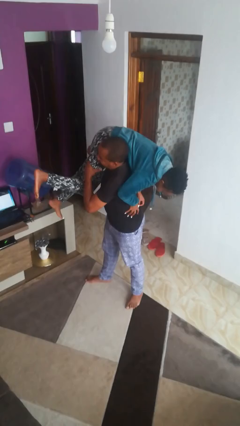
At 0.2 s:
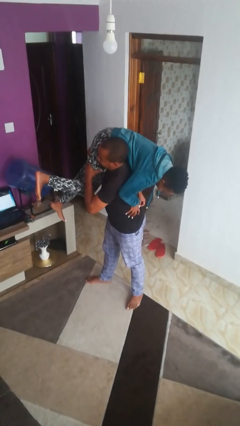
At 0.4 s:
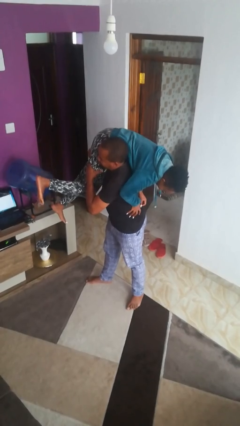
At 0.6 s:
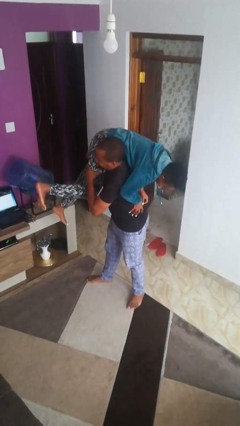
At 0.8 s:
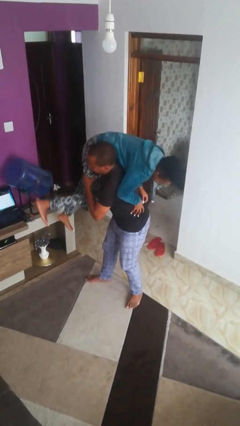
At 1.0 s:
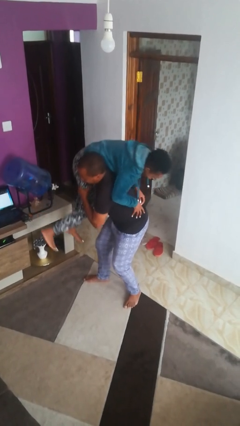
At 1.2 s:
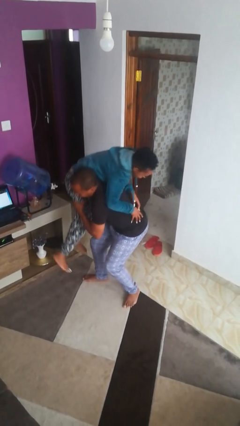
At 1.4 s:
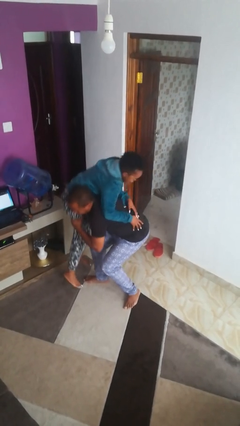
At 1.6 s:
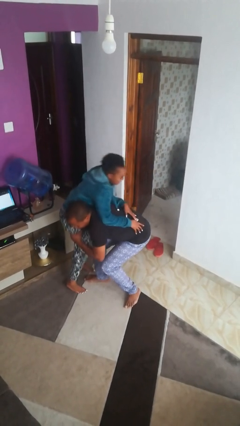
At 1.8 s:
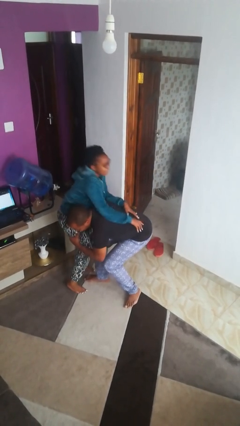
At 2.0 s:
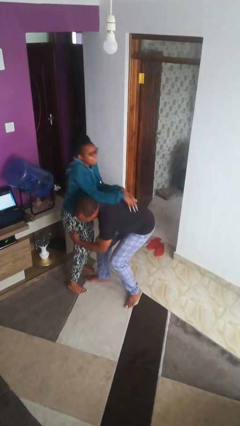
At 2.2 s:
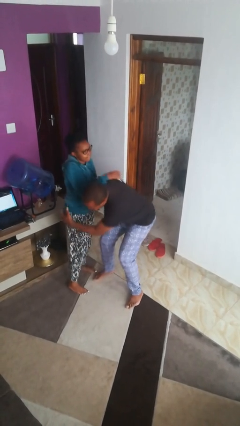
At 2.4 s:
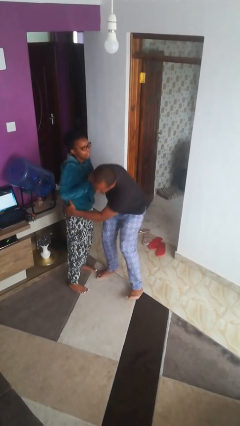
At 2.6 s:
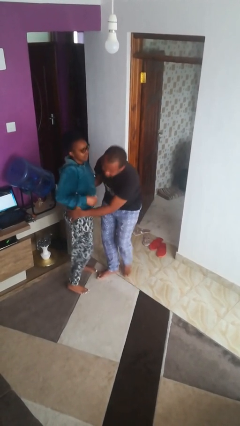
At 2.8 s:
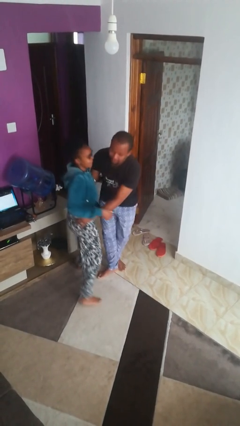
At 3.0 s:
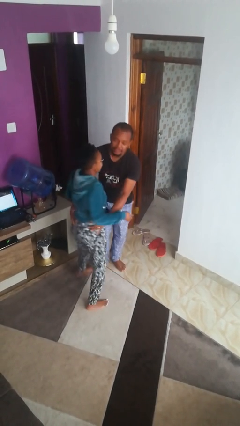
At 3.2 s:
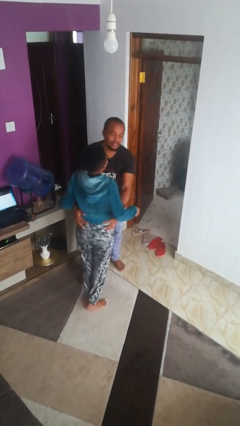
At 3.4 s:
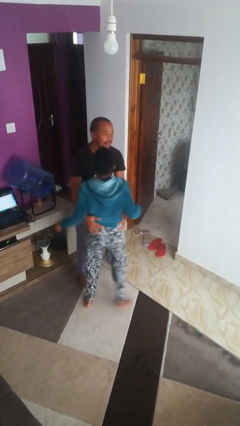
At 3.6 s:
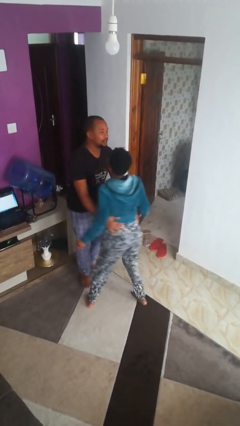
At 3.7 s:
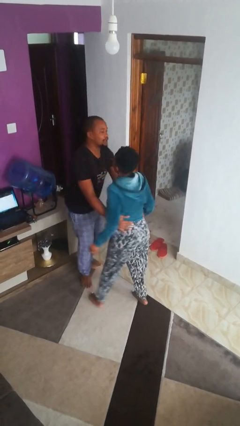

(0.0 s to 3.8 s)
person puts down person

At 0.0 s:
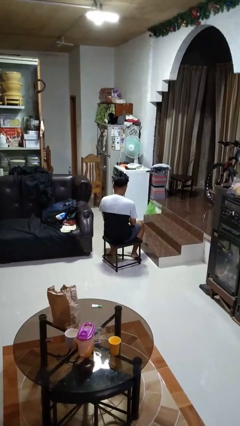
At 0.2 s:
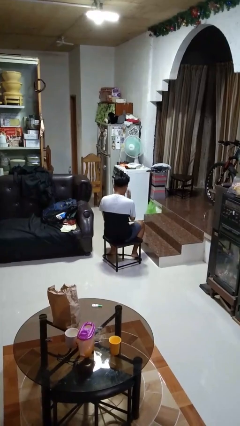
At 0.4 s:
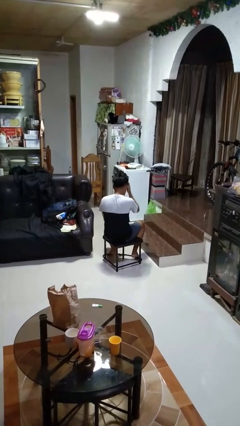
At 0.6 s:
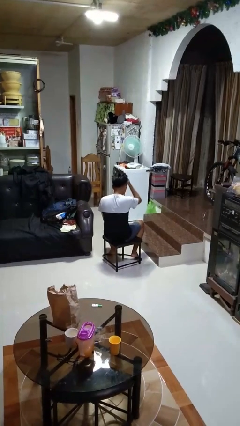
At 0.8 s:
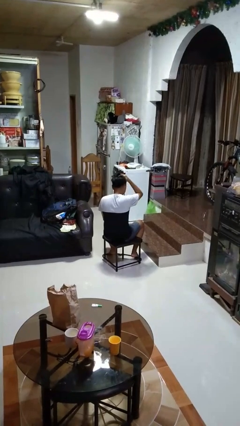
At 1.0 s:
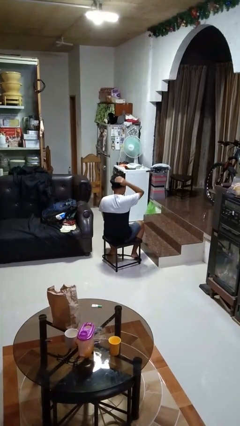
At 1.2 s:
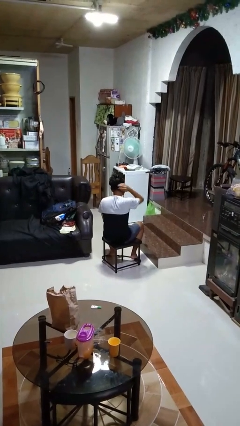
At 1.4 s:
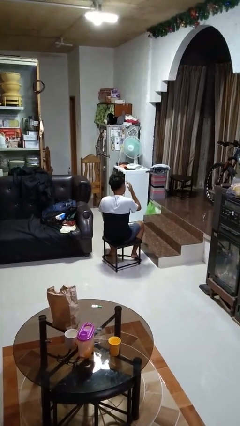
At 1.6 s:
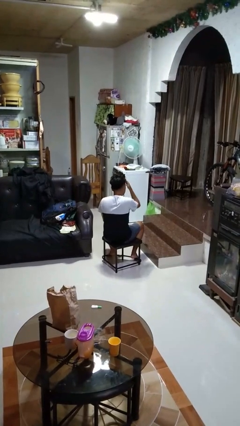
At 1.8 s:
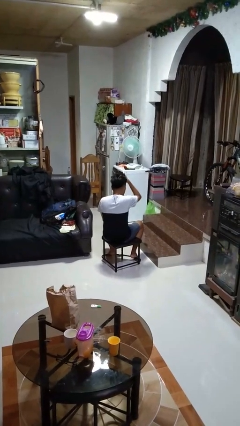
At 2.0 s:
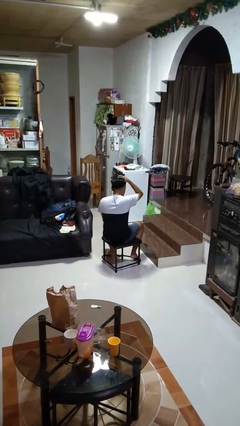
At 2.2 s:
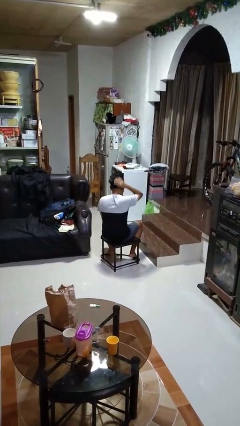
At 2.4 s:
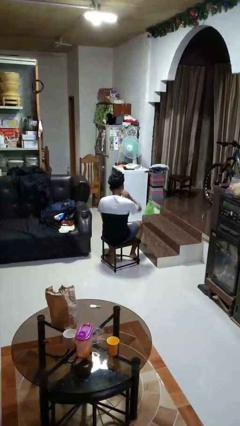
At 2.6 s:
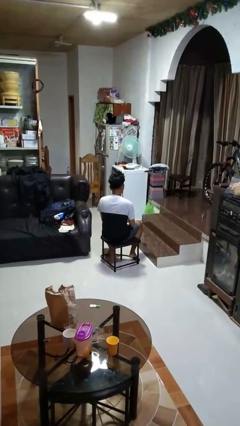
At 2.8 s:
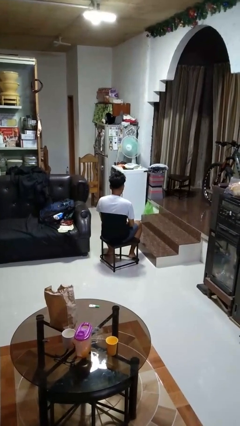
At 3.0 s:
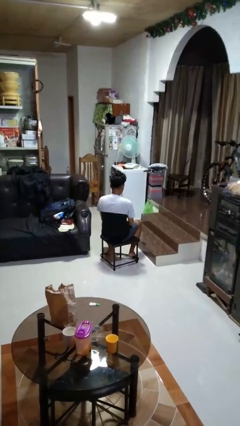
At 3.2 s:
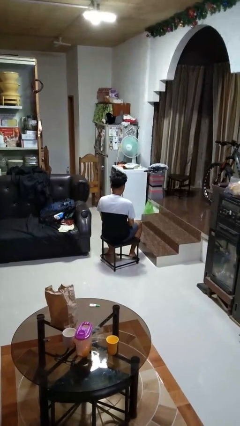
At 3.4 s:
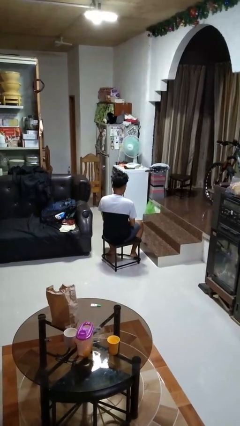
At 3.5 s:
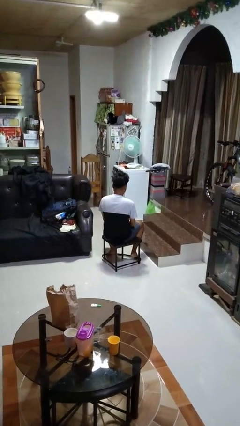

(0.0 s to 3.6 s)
person strokes hair

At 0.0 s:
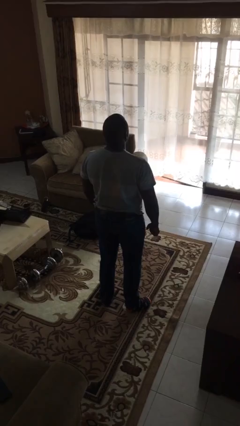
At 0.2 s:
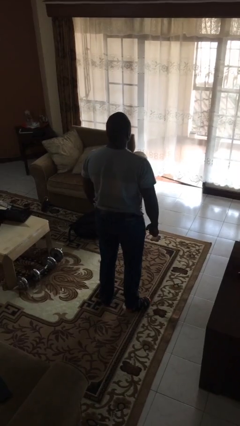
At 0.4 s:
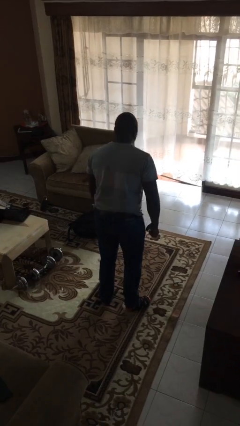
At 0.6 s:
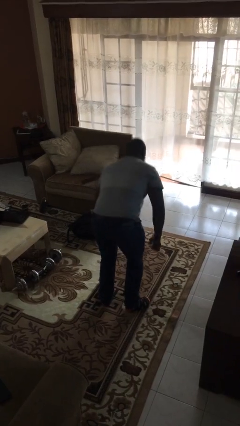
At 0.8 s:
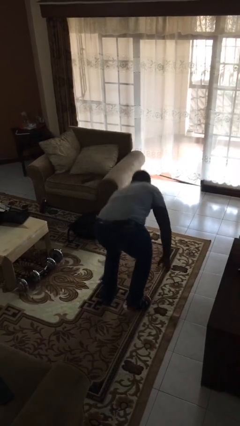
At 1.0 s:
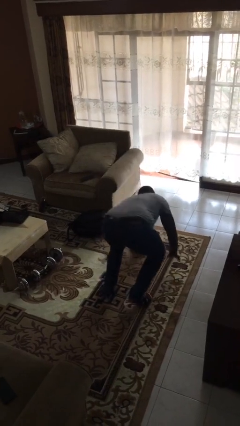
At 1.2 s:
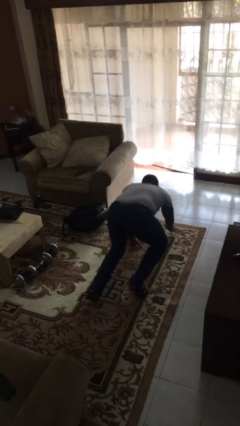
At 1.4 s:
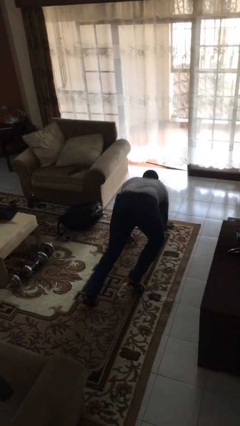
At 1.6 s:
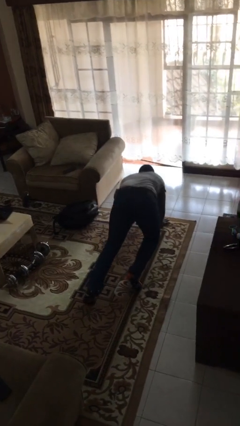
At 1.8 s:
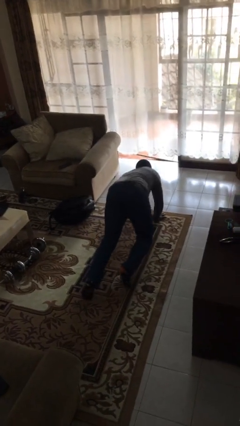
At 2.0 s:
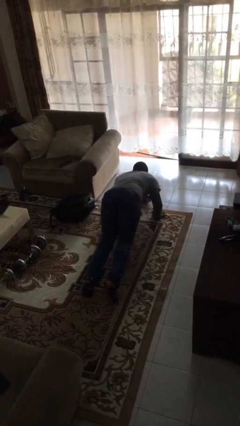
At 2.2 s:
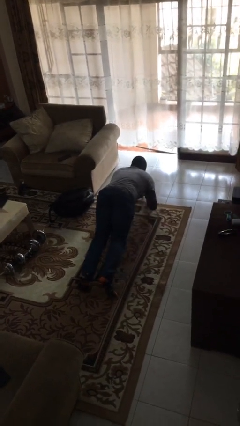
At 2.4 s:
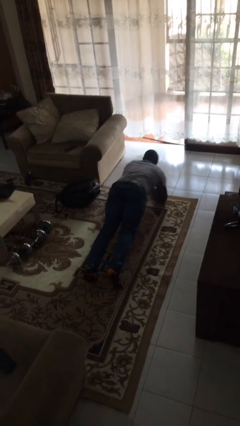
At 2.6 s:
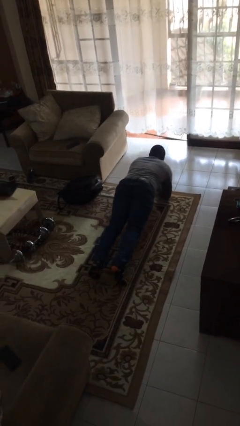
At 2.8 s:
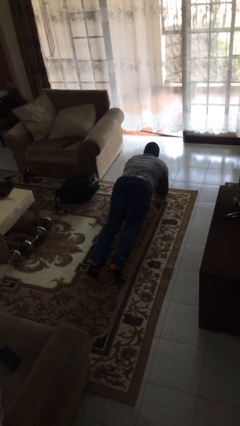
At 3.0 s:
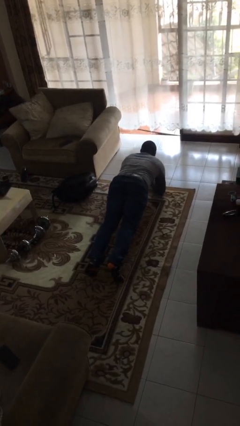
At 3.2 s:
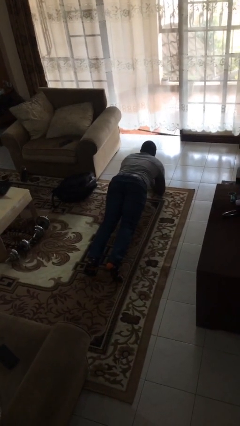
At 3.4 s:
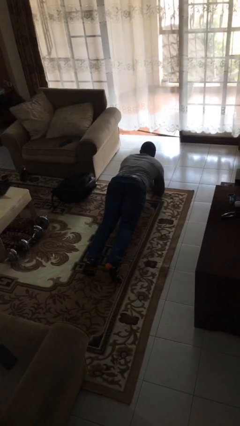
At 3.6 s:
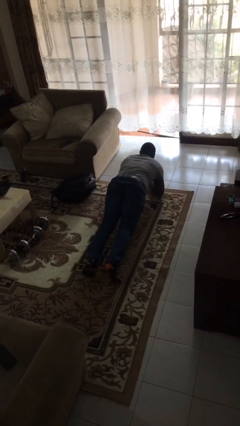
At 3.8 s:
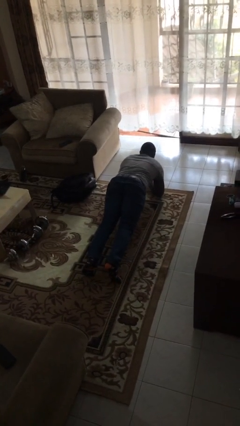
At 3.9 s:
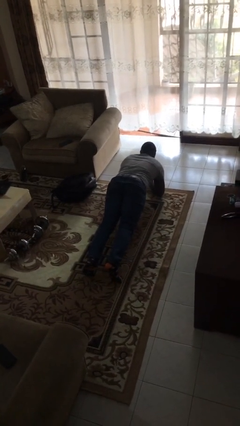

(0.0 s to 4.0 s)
person exercises with plank

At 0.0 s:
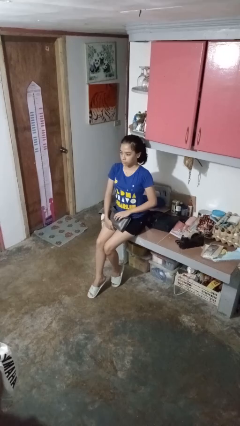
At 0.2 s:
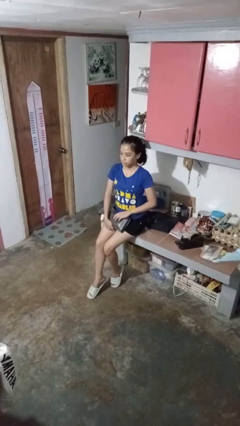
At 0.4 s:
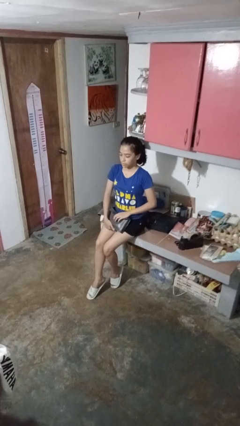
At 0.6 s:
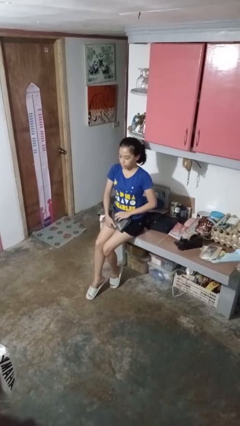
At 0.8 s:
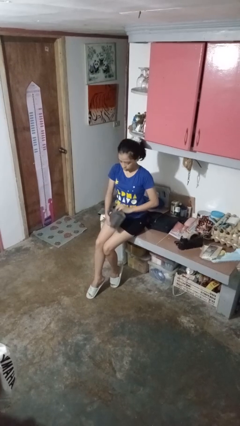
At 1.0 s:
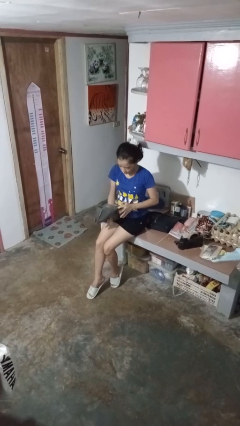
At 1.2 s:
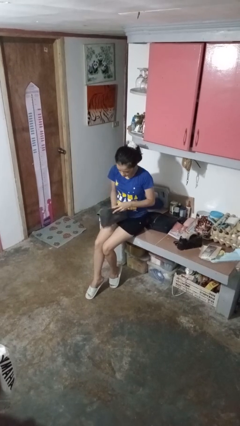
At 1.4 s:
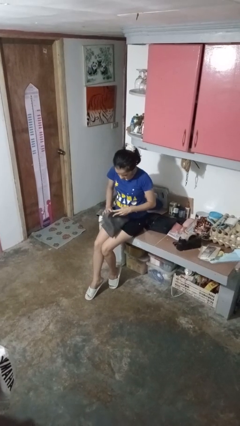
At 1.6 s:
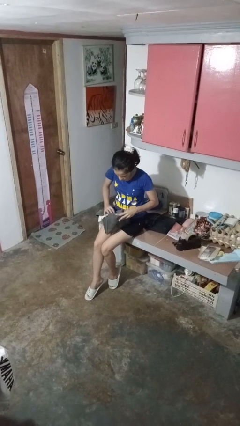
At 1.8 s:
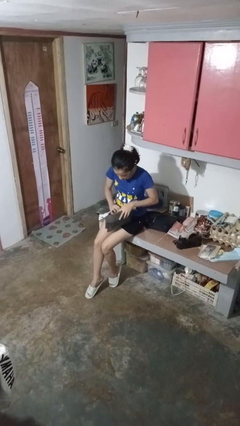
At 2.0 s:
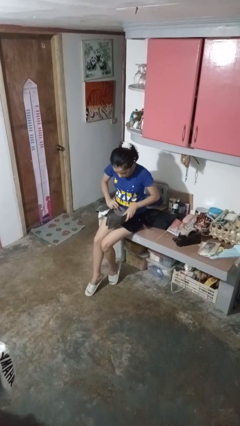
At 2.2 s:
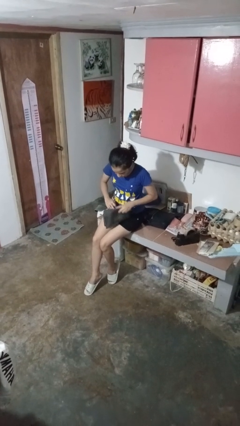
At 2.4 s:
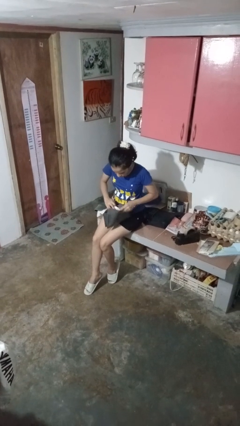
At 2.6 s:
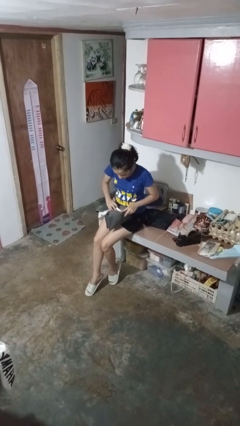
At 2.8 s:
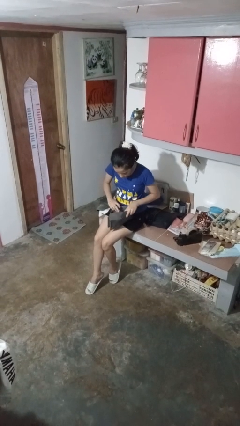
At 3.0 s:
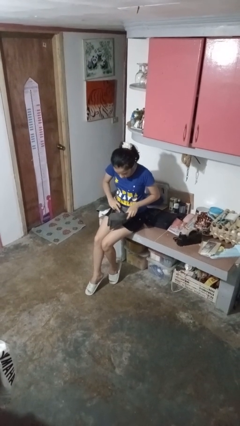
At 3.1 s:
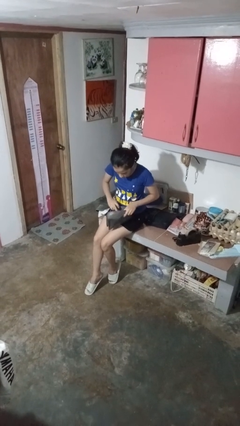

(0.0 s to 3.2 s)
person searches in purse

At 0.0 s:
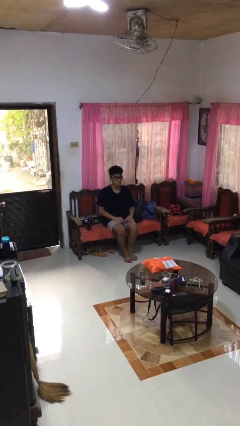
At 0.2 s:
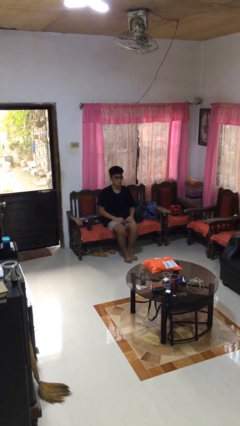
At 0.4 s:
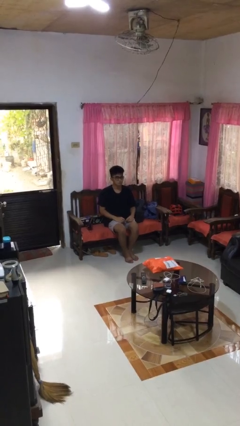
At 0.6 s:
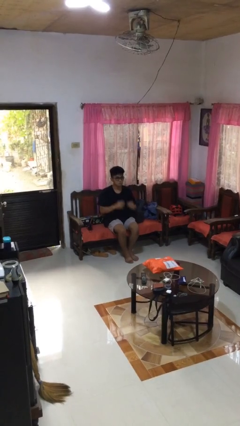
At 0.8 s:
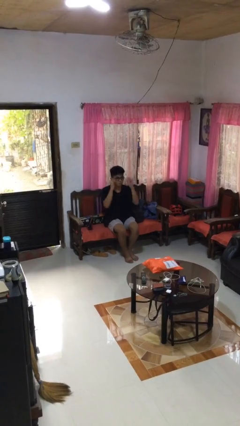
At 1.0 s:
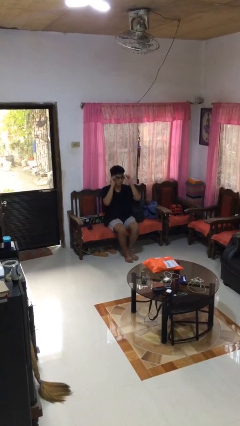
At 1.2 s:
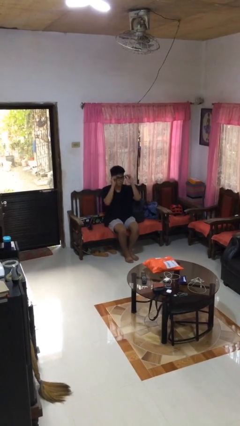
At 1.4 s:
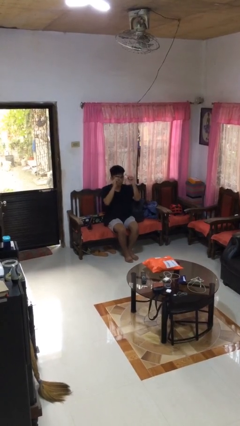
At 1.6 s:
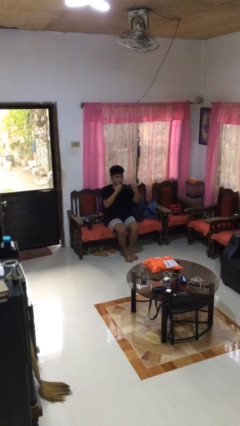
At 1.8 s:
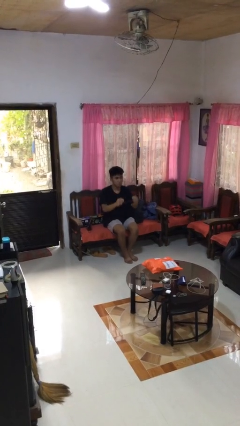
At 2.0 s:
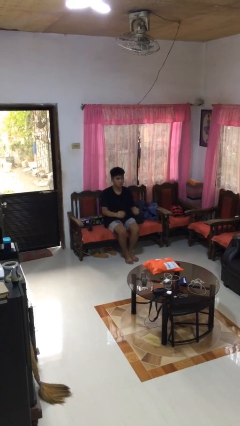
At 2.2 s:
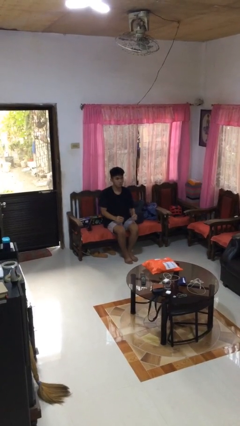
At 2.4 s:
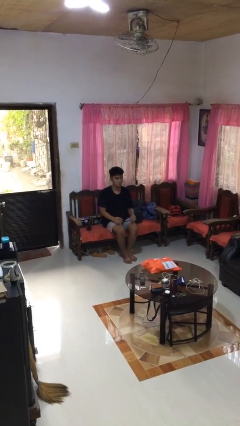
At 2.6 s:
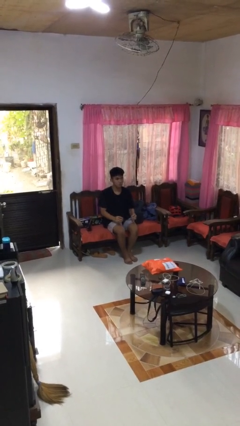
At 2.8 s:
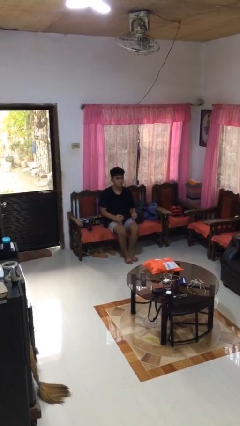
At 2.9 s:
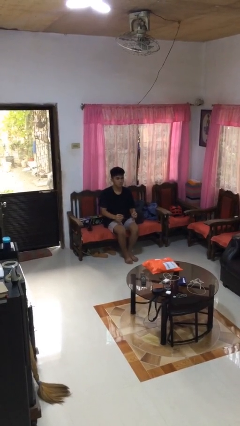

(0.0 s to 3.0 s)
person takes off glasses
